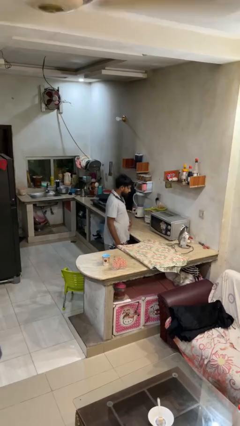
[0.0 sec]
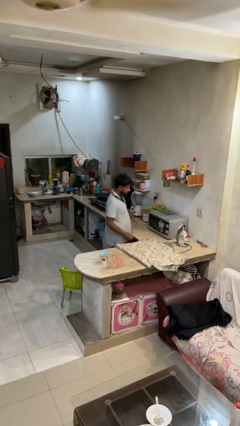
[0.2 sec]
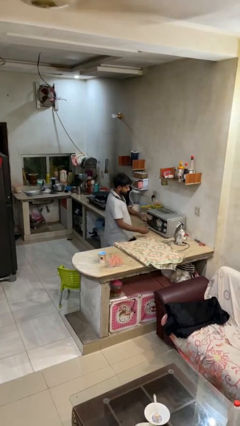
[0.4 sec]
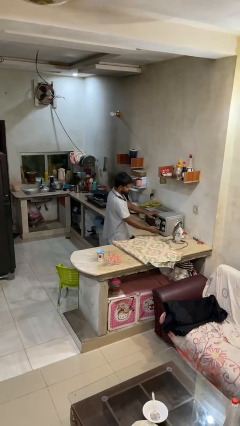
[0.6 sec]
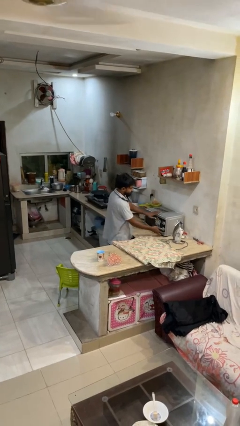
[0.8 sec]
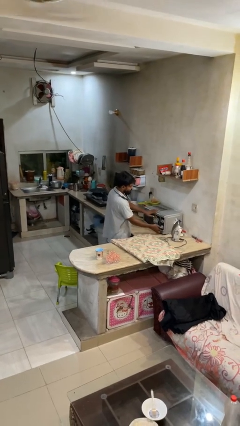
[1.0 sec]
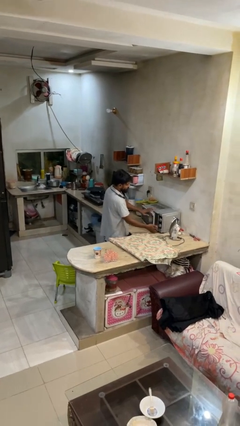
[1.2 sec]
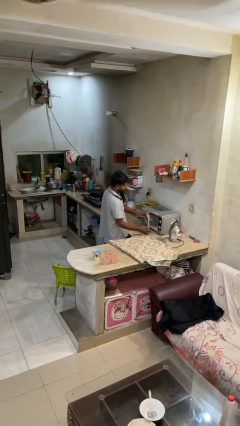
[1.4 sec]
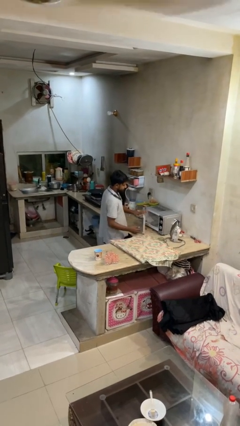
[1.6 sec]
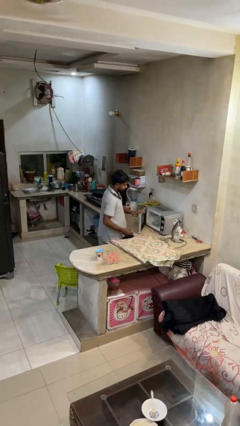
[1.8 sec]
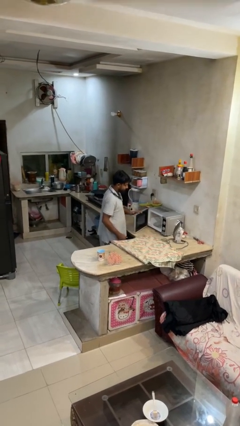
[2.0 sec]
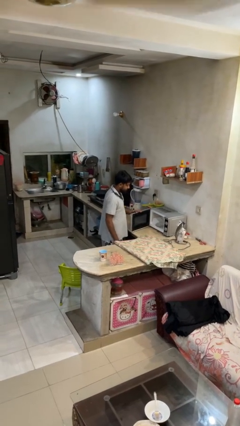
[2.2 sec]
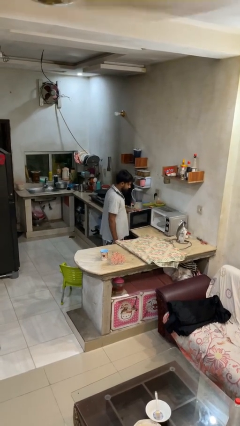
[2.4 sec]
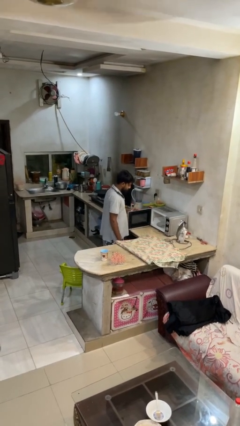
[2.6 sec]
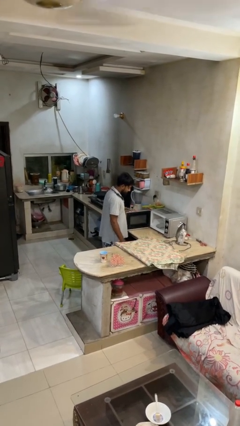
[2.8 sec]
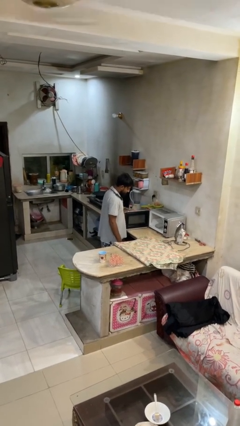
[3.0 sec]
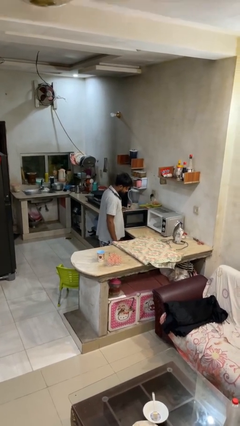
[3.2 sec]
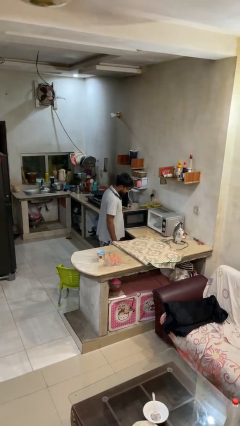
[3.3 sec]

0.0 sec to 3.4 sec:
person opens microwave

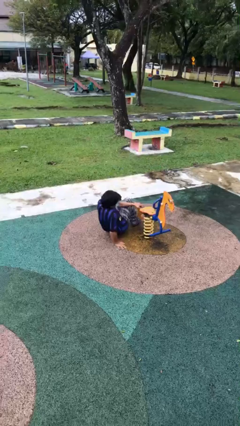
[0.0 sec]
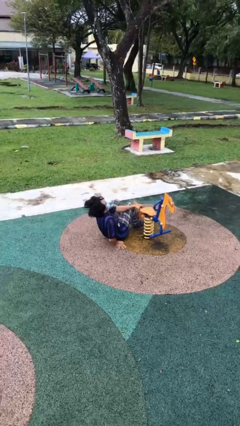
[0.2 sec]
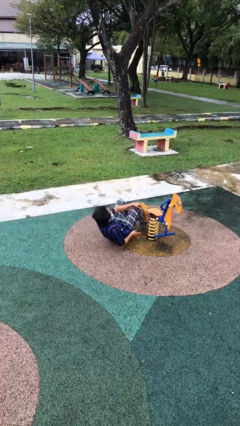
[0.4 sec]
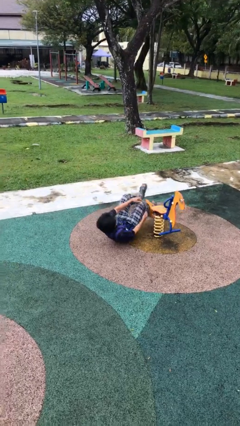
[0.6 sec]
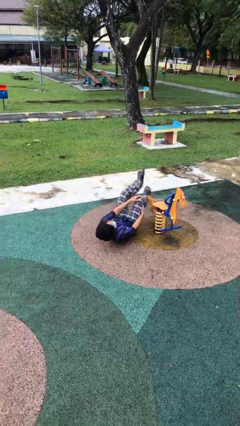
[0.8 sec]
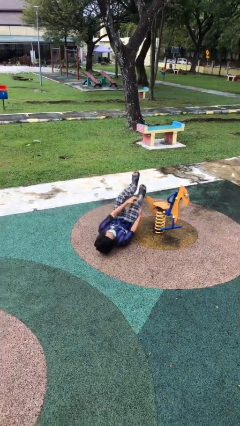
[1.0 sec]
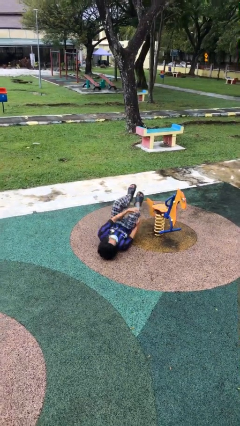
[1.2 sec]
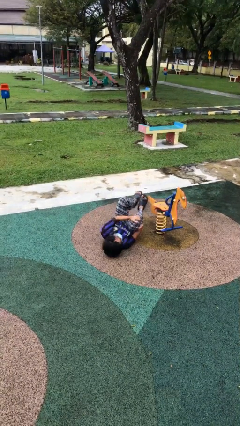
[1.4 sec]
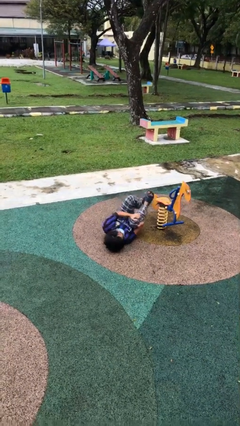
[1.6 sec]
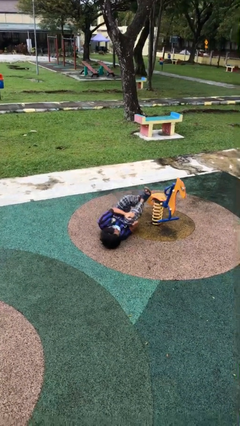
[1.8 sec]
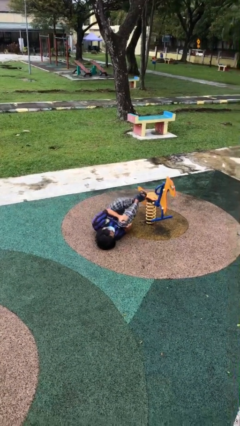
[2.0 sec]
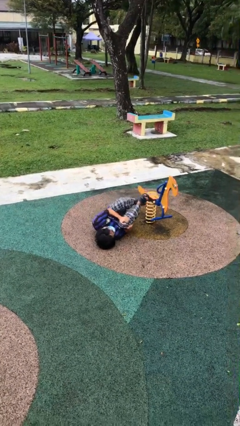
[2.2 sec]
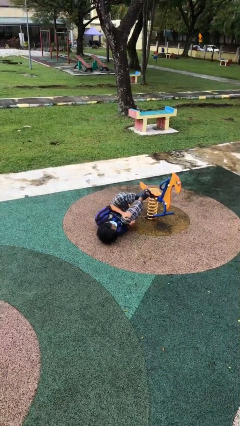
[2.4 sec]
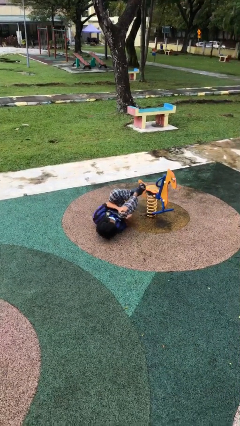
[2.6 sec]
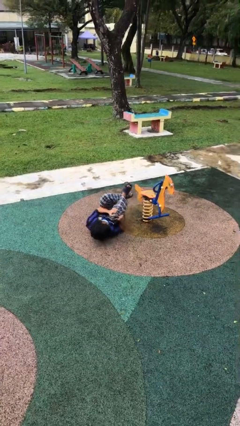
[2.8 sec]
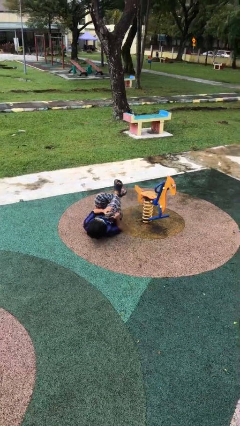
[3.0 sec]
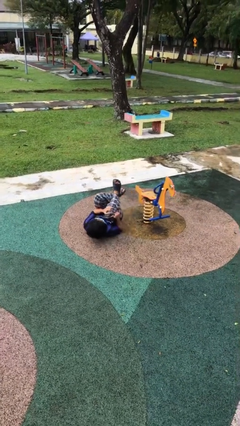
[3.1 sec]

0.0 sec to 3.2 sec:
person lies down on floor

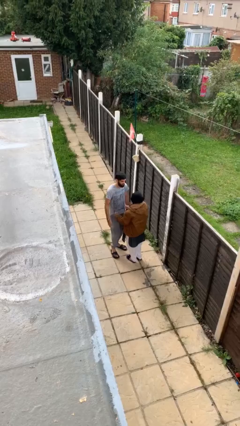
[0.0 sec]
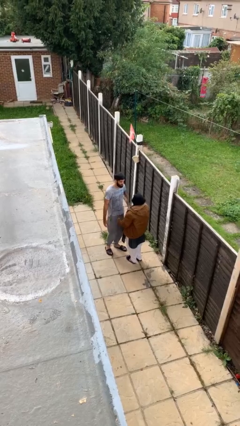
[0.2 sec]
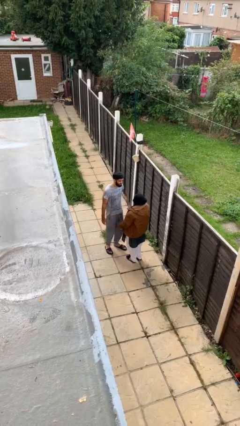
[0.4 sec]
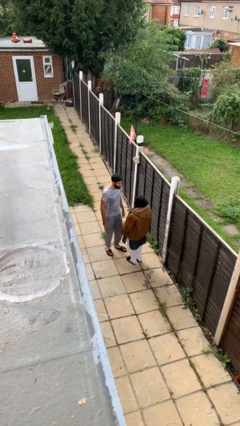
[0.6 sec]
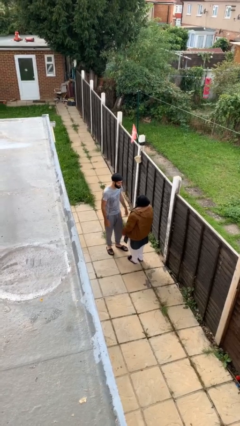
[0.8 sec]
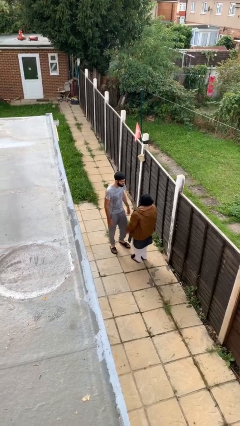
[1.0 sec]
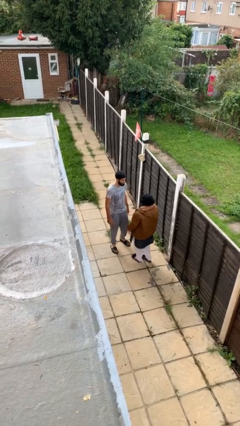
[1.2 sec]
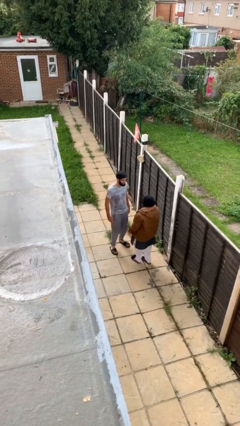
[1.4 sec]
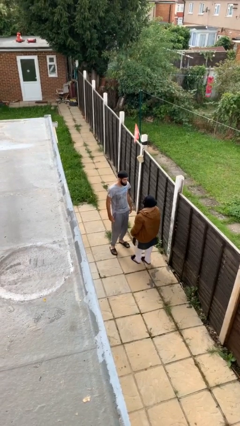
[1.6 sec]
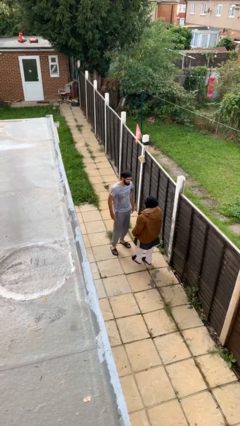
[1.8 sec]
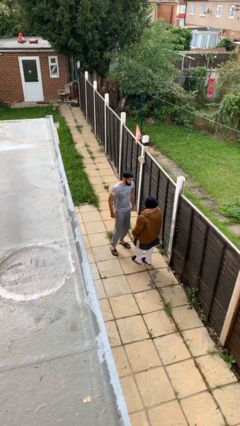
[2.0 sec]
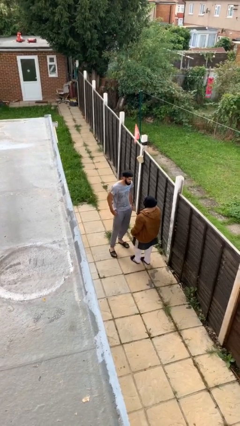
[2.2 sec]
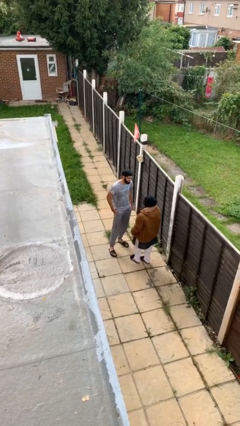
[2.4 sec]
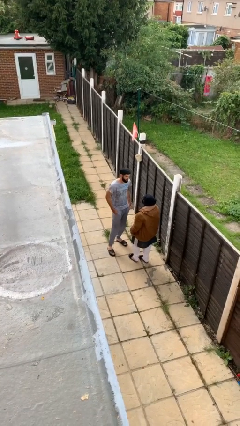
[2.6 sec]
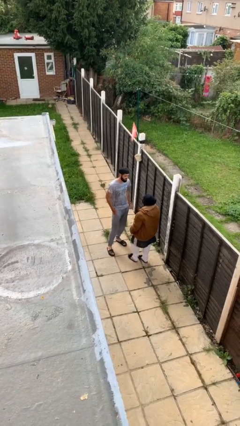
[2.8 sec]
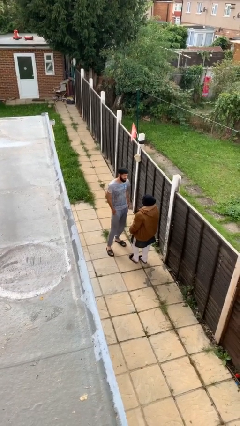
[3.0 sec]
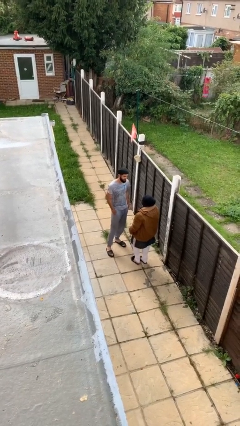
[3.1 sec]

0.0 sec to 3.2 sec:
person talks to person

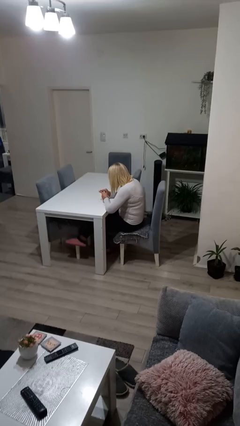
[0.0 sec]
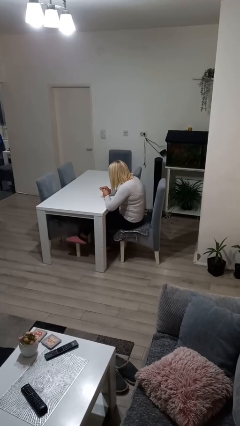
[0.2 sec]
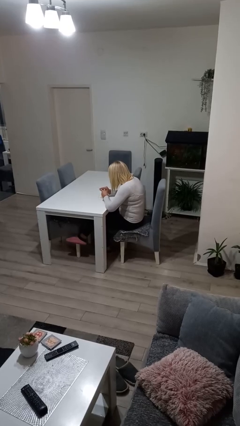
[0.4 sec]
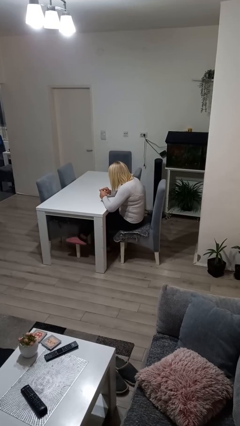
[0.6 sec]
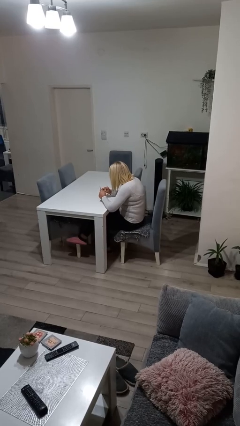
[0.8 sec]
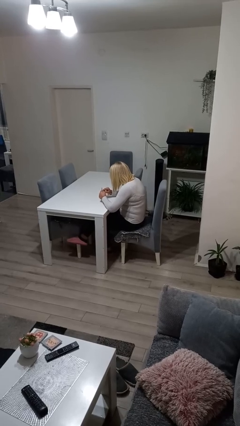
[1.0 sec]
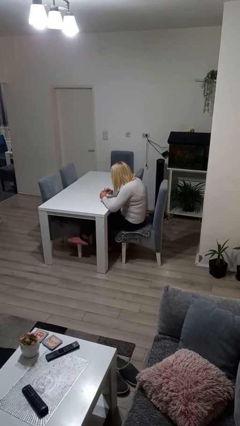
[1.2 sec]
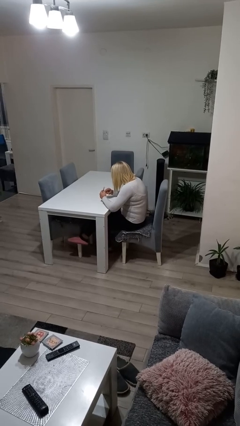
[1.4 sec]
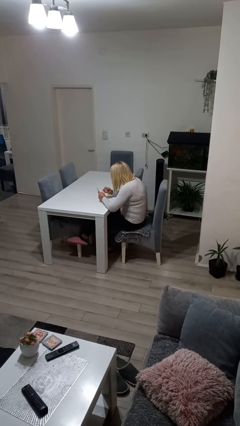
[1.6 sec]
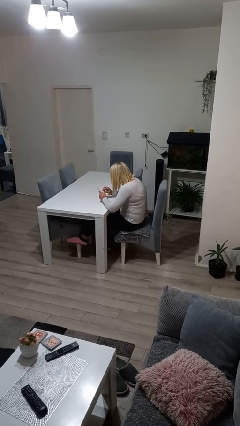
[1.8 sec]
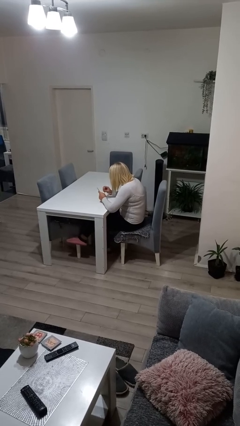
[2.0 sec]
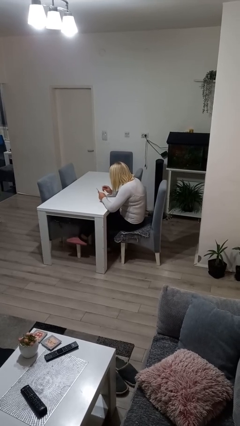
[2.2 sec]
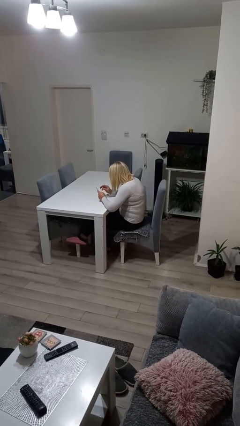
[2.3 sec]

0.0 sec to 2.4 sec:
person files fingernails

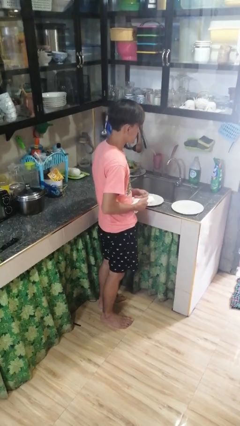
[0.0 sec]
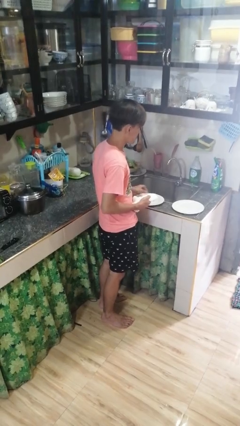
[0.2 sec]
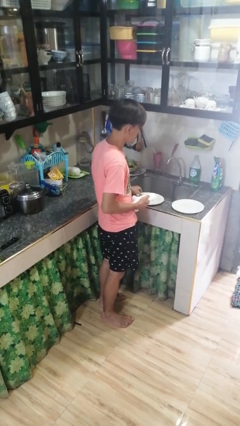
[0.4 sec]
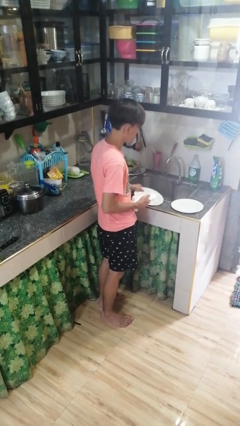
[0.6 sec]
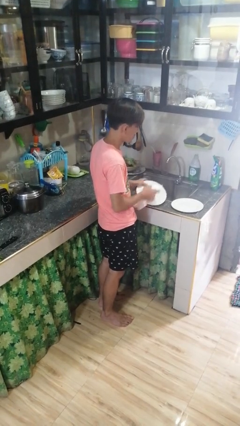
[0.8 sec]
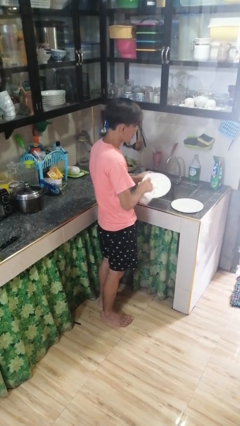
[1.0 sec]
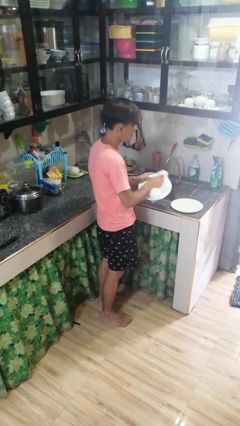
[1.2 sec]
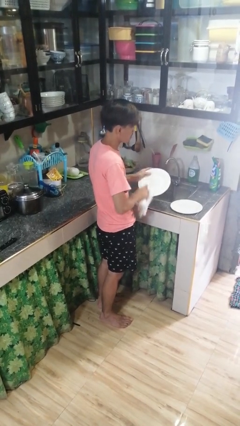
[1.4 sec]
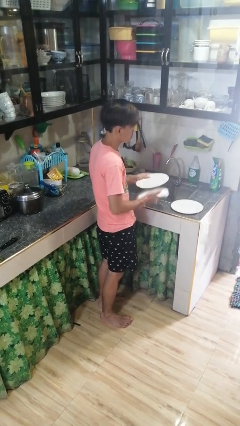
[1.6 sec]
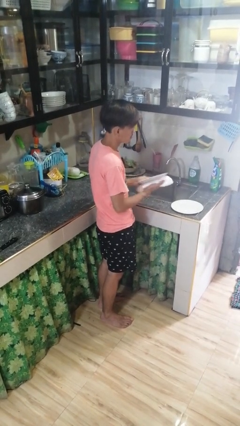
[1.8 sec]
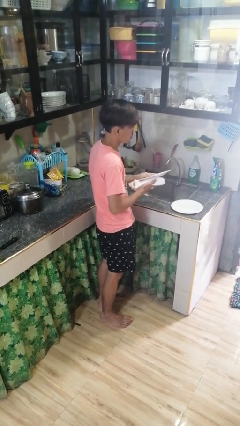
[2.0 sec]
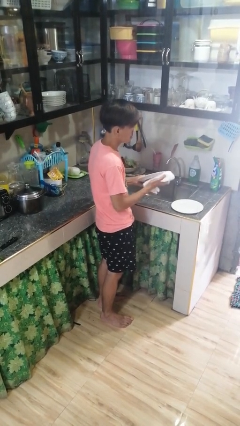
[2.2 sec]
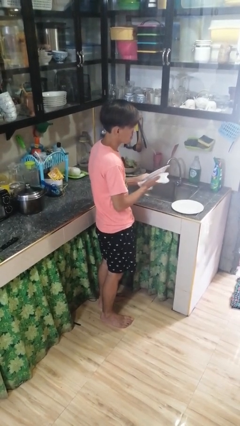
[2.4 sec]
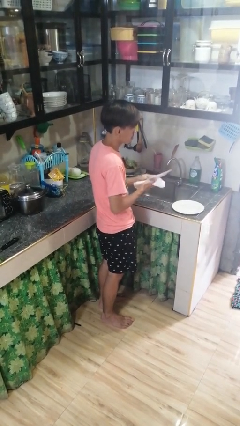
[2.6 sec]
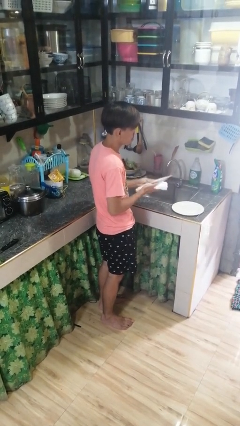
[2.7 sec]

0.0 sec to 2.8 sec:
person dries dish

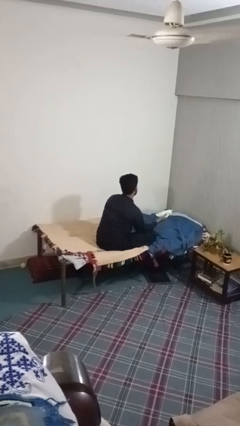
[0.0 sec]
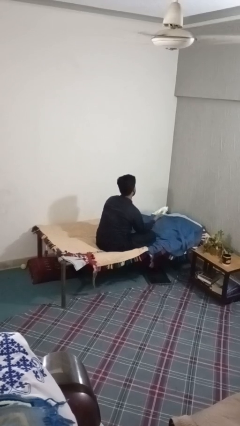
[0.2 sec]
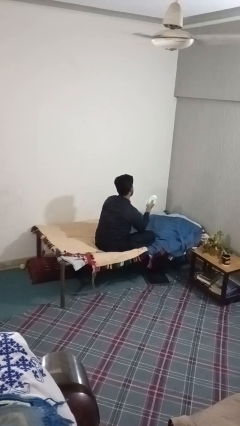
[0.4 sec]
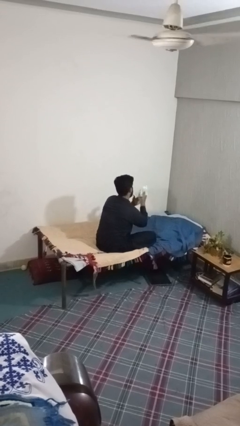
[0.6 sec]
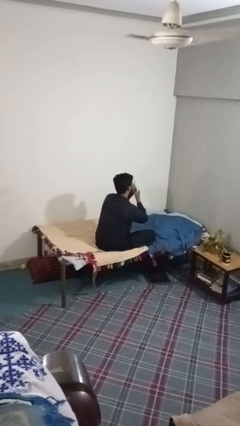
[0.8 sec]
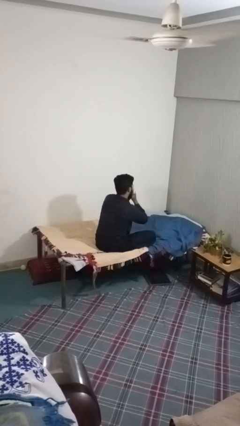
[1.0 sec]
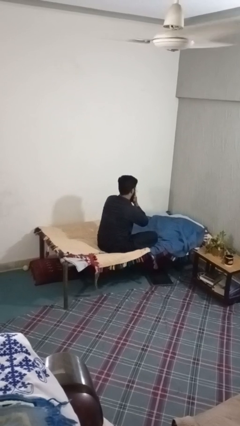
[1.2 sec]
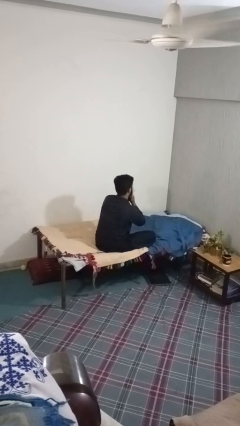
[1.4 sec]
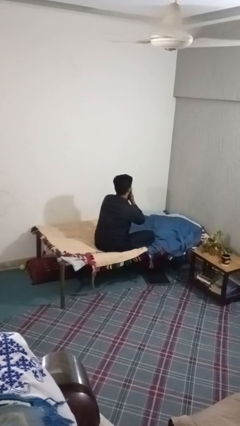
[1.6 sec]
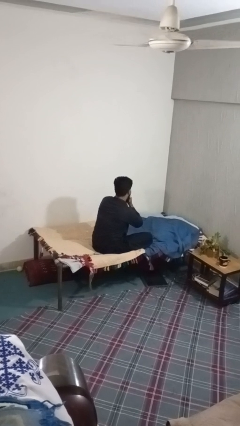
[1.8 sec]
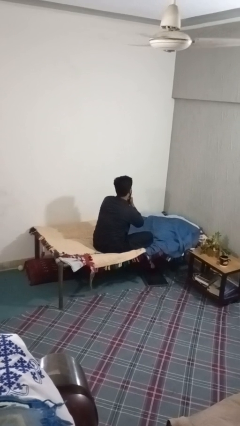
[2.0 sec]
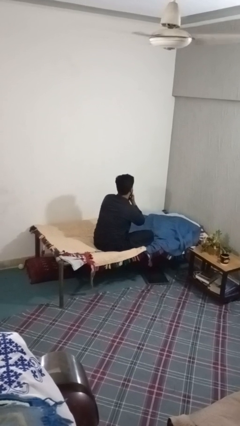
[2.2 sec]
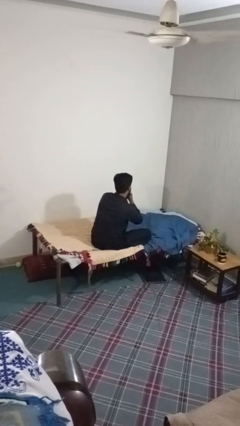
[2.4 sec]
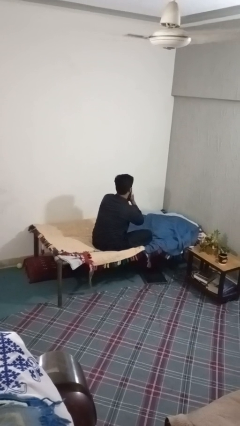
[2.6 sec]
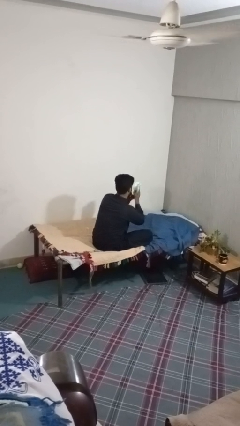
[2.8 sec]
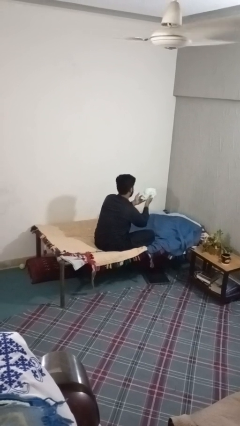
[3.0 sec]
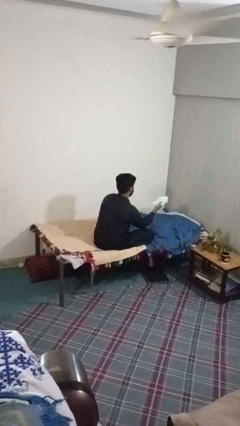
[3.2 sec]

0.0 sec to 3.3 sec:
person blows nose
